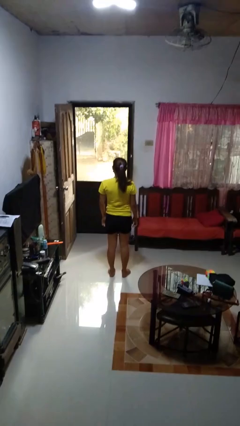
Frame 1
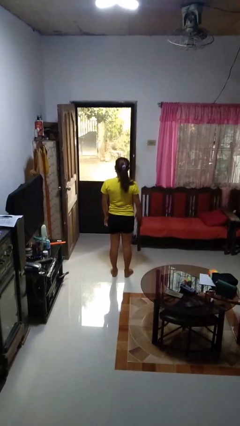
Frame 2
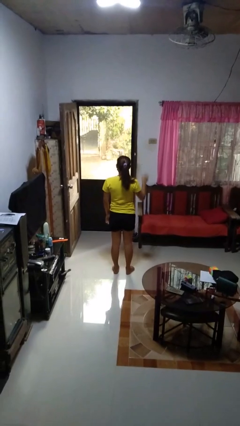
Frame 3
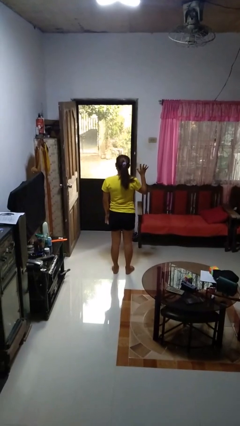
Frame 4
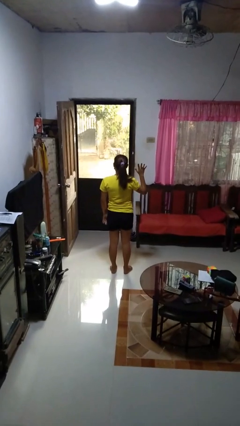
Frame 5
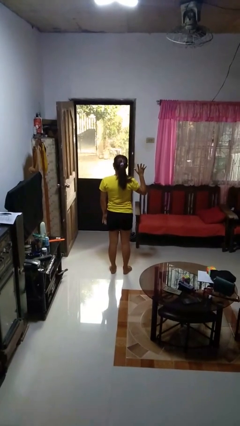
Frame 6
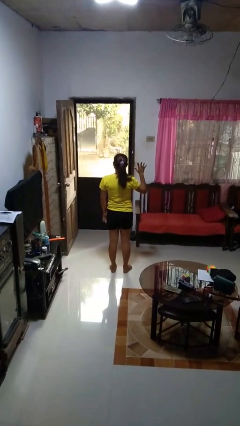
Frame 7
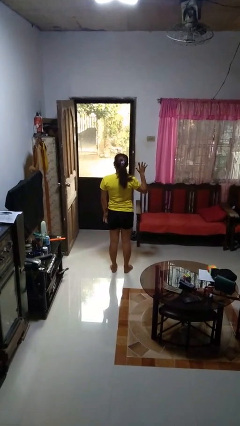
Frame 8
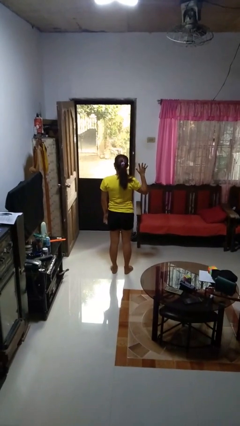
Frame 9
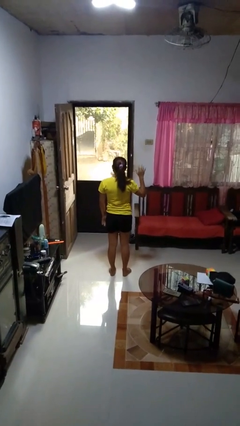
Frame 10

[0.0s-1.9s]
person gestures number five

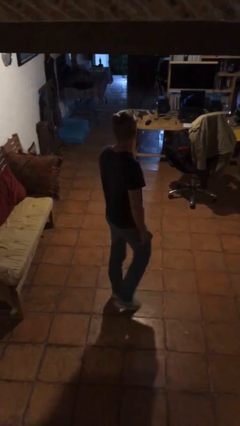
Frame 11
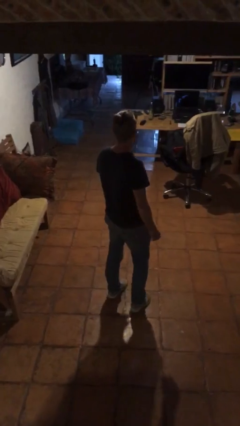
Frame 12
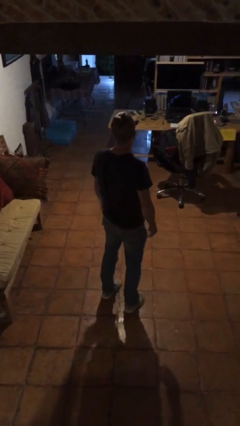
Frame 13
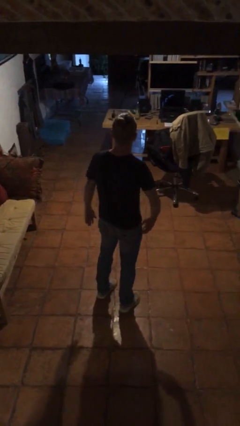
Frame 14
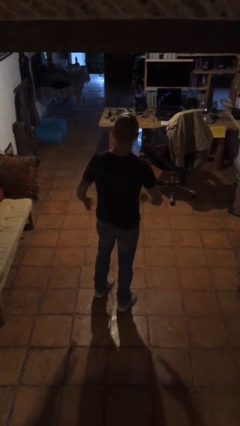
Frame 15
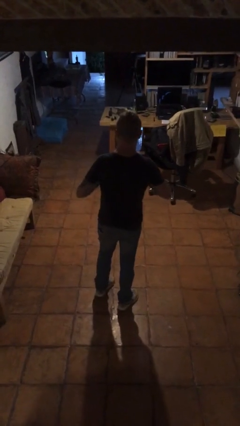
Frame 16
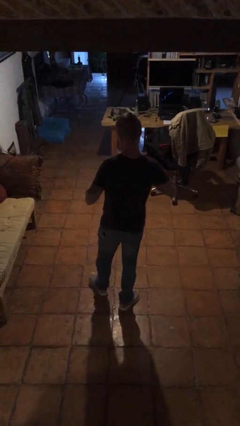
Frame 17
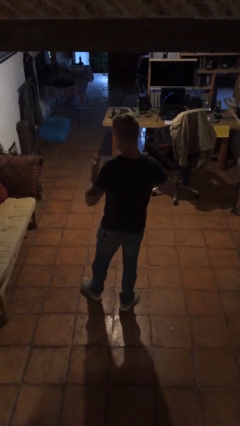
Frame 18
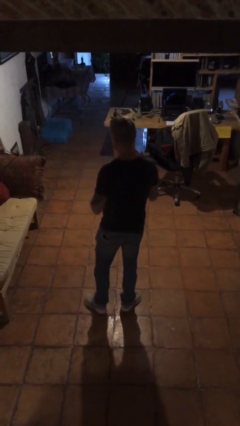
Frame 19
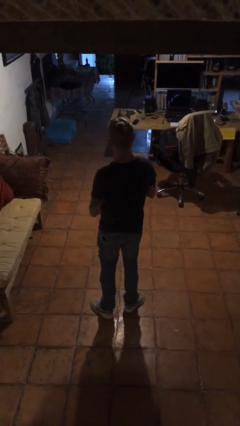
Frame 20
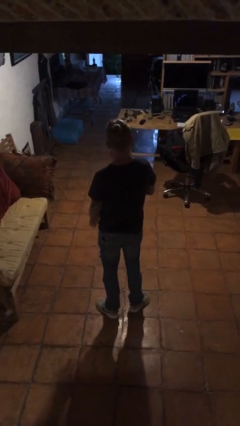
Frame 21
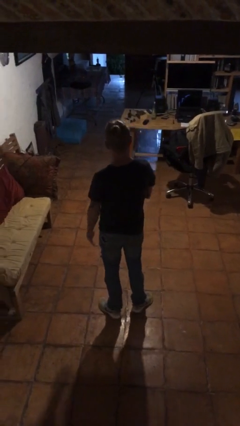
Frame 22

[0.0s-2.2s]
person drums on chest

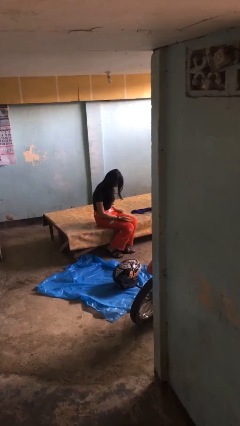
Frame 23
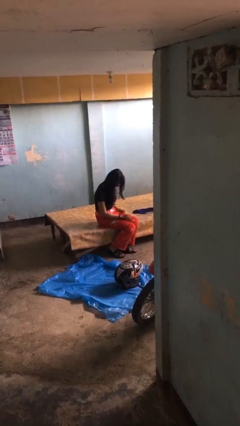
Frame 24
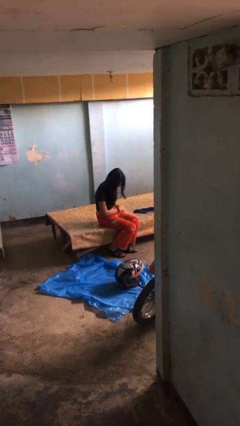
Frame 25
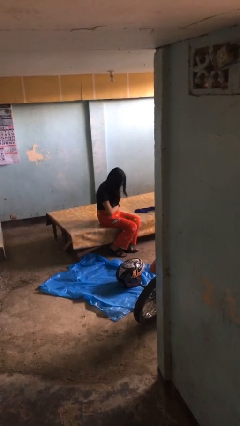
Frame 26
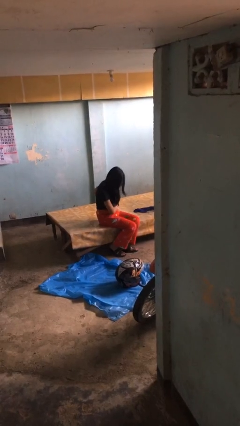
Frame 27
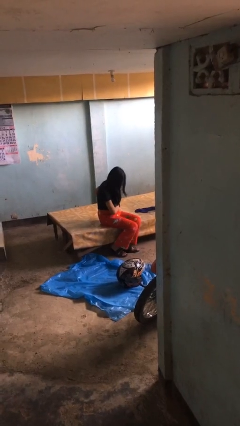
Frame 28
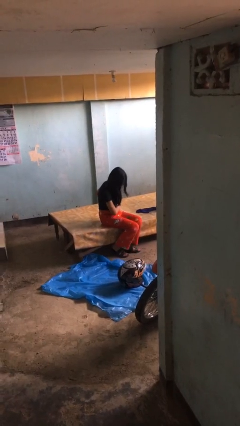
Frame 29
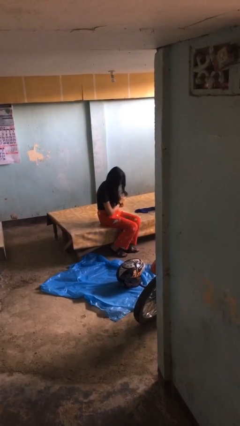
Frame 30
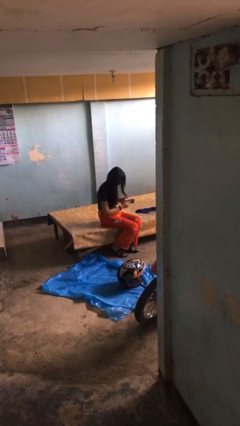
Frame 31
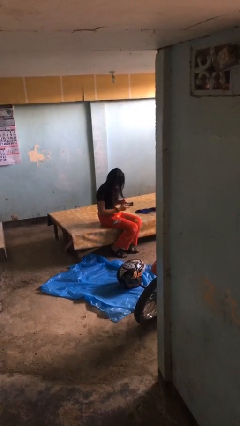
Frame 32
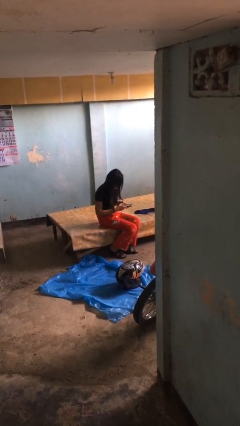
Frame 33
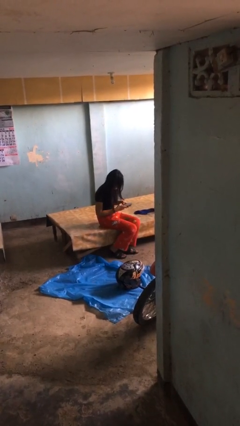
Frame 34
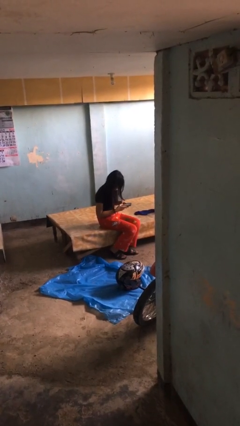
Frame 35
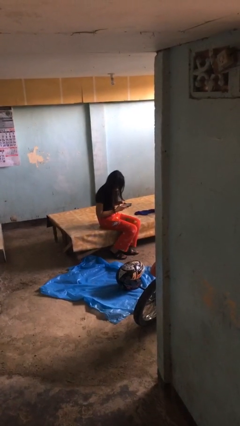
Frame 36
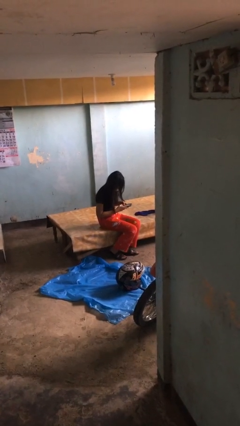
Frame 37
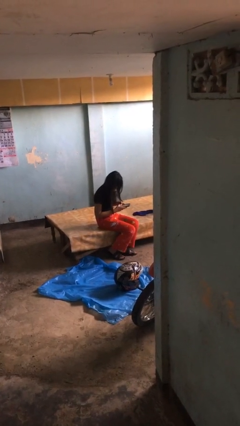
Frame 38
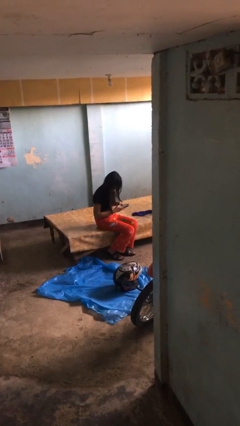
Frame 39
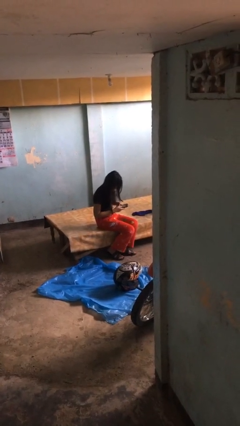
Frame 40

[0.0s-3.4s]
person takes phone from pocket

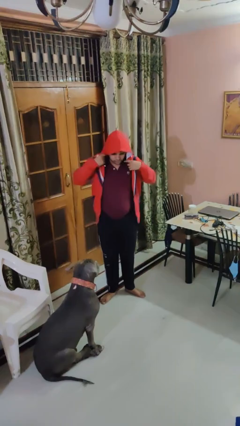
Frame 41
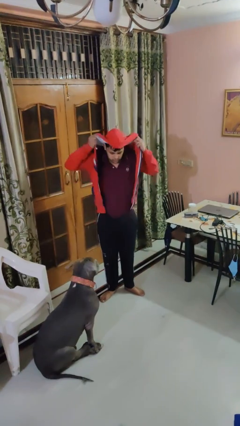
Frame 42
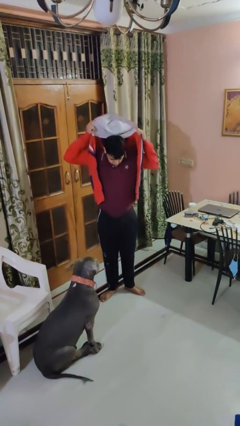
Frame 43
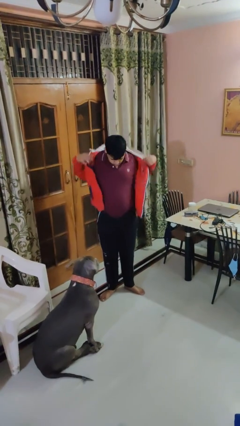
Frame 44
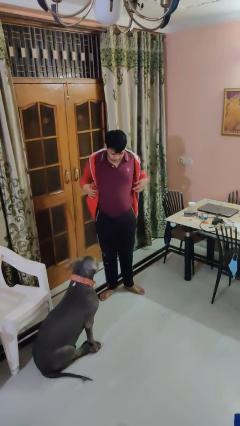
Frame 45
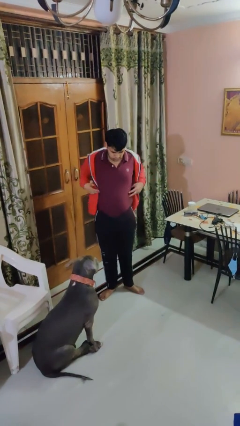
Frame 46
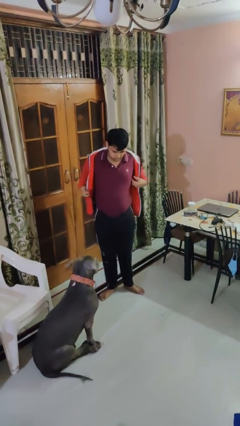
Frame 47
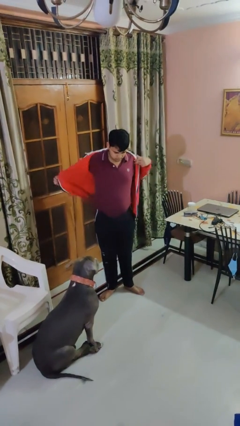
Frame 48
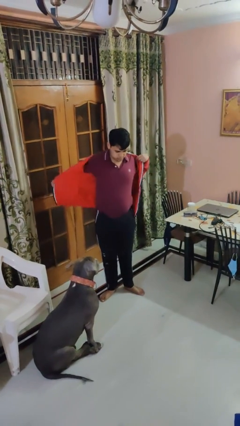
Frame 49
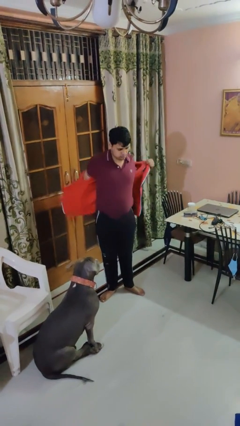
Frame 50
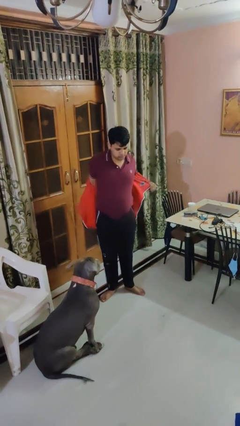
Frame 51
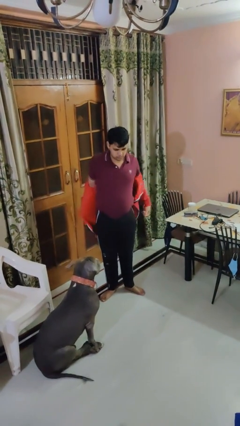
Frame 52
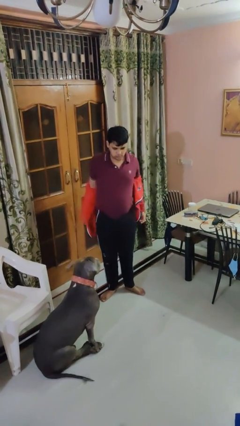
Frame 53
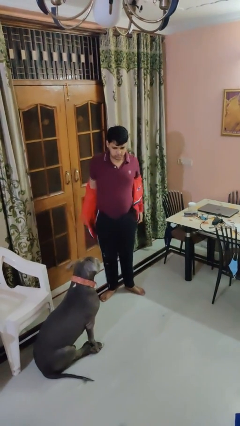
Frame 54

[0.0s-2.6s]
person takes off hoodie

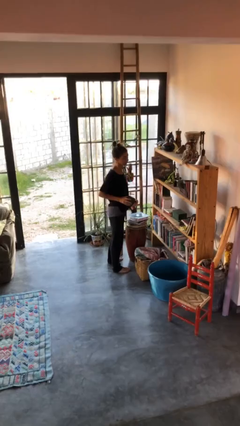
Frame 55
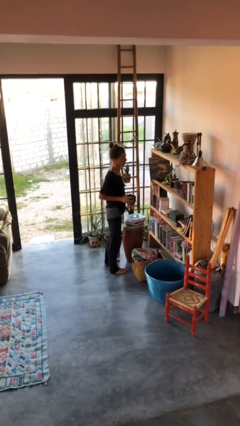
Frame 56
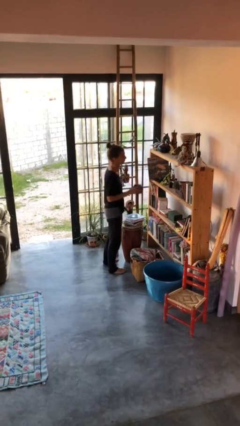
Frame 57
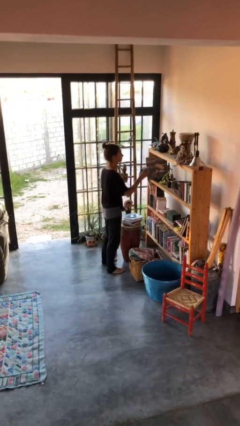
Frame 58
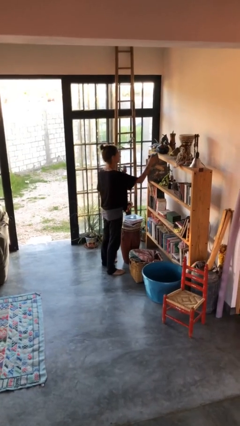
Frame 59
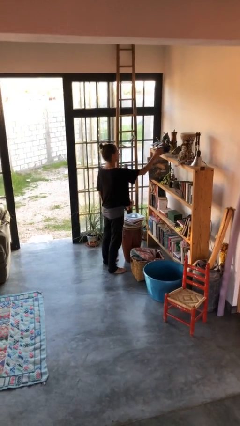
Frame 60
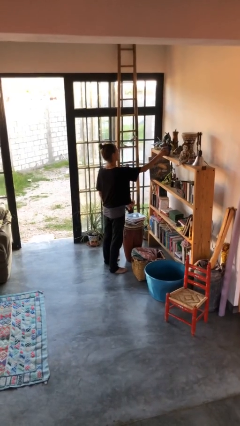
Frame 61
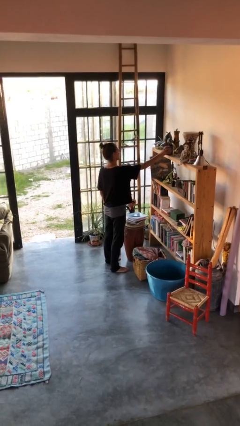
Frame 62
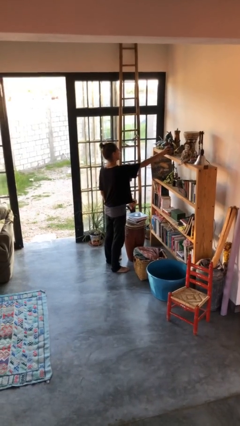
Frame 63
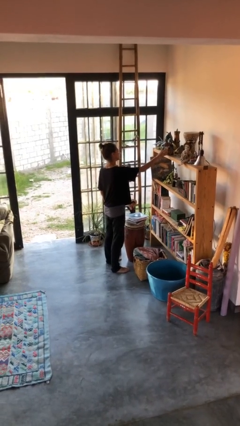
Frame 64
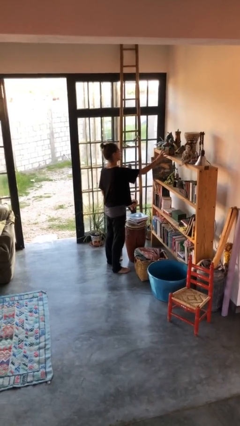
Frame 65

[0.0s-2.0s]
person puts down object on countertop

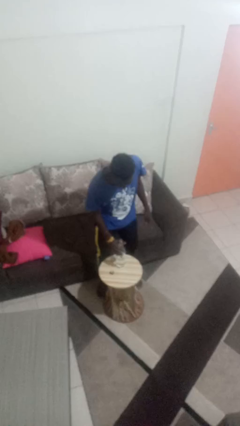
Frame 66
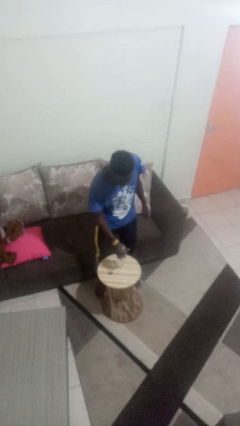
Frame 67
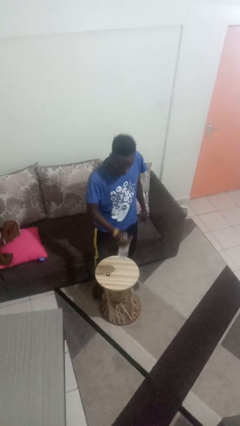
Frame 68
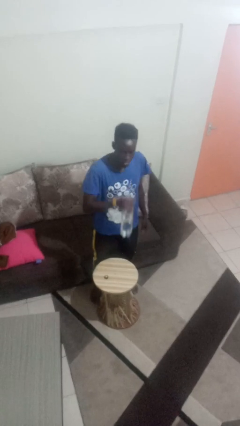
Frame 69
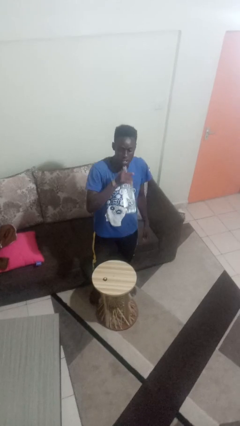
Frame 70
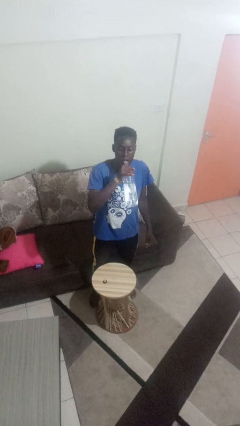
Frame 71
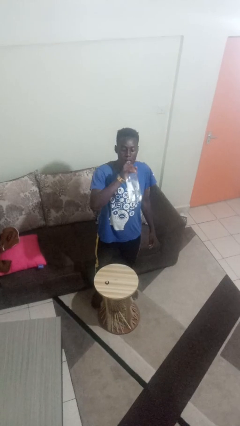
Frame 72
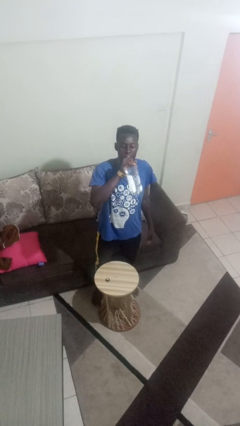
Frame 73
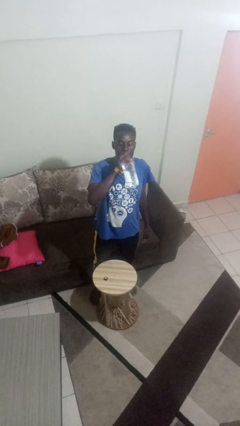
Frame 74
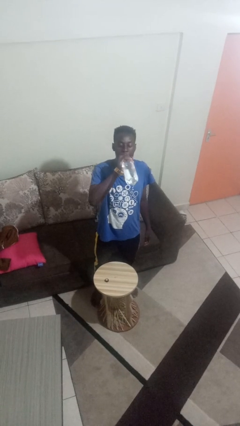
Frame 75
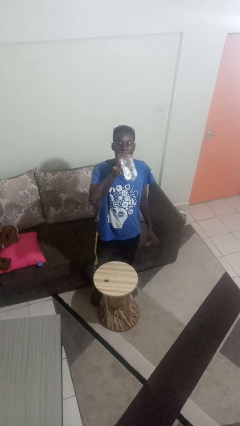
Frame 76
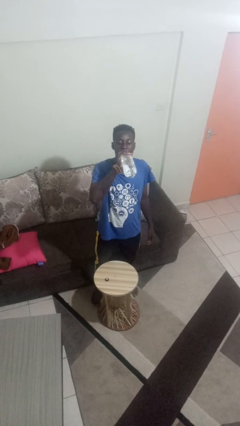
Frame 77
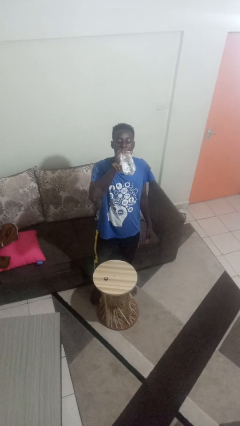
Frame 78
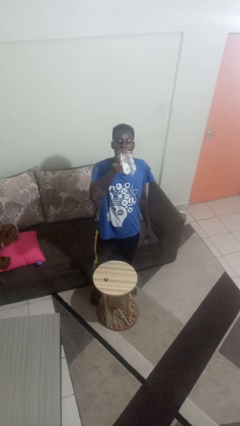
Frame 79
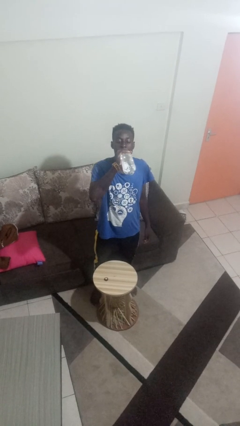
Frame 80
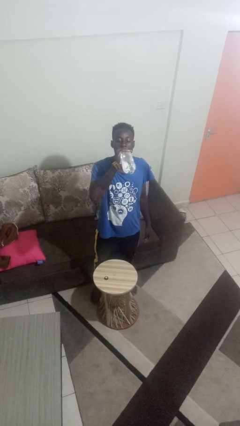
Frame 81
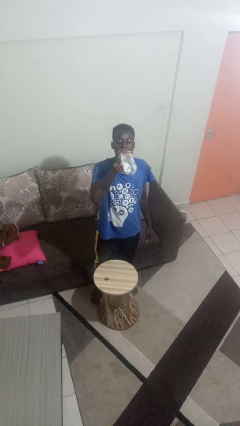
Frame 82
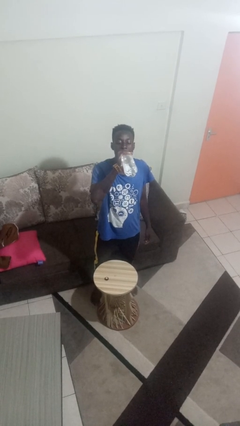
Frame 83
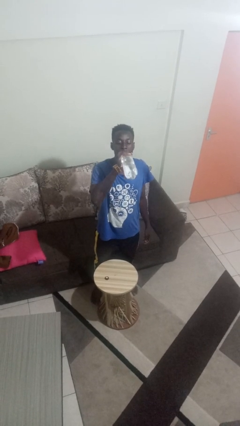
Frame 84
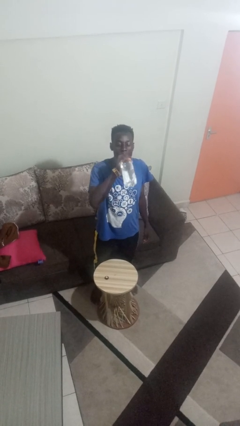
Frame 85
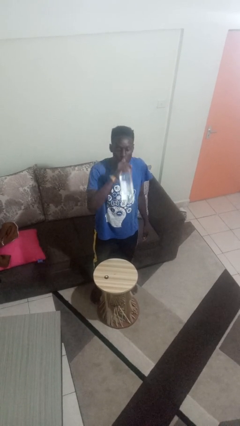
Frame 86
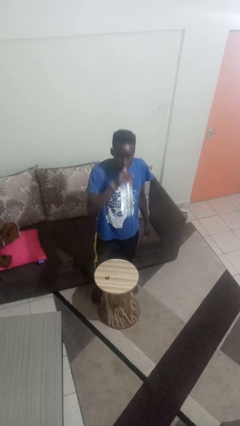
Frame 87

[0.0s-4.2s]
person drinks from bottle

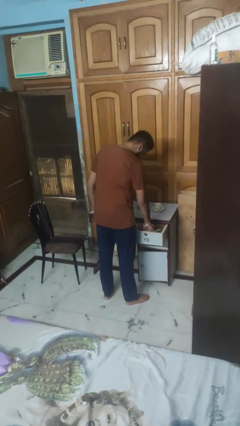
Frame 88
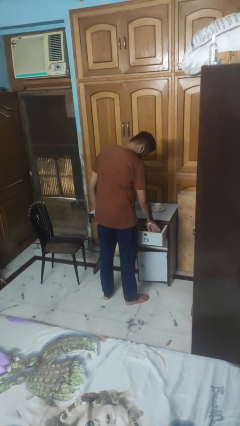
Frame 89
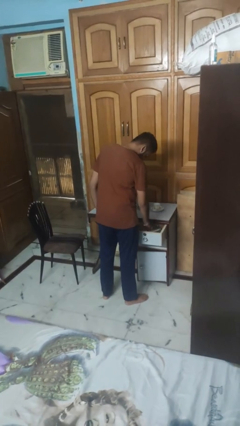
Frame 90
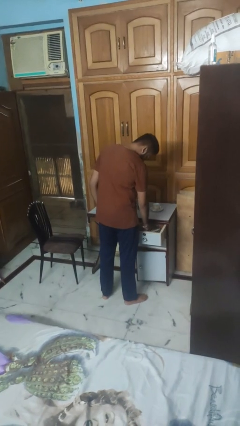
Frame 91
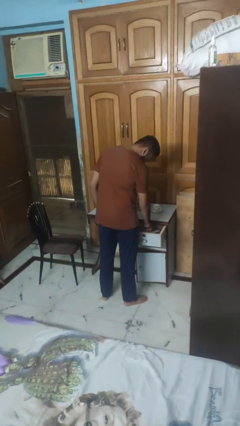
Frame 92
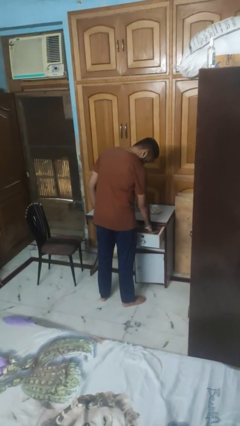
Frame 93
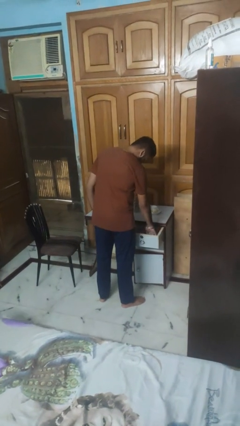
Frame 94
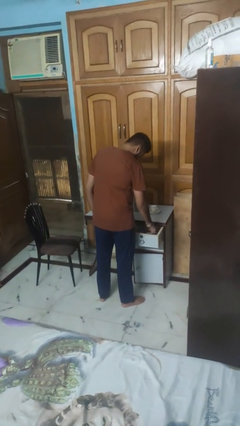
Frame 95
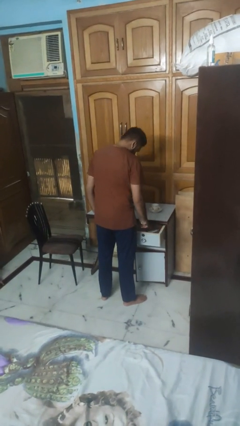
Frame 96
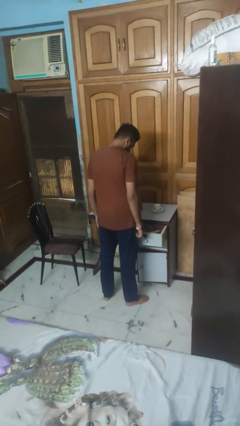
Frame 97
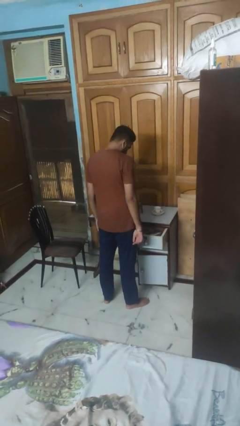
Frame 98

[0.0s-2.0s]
person searches in kitchen drawer
